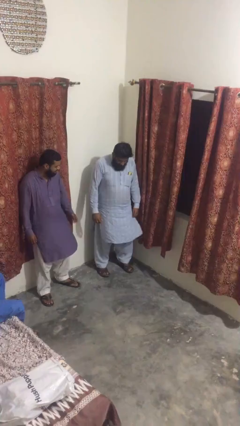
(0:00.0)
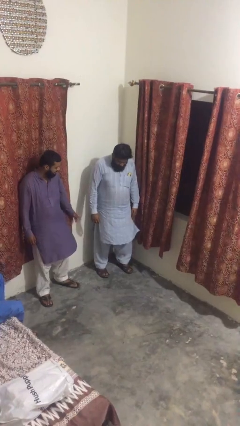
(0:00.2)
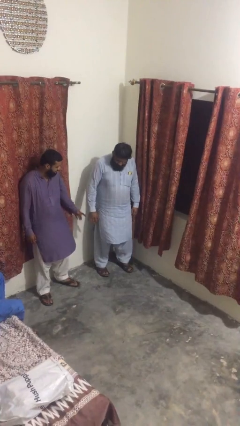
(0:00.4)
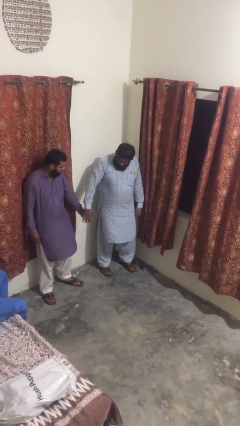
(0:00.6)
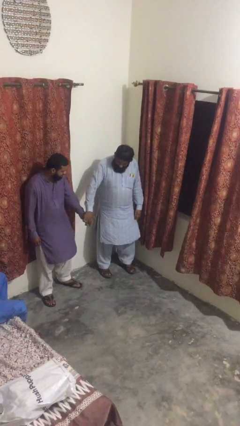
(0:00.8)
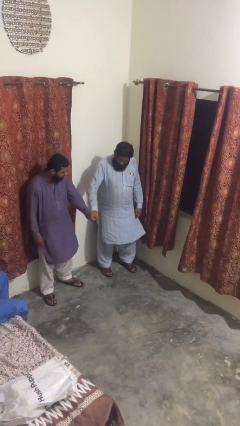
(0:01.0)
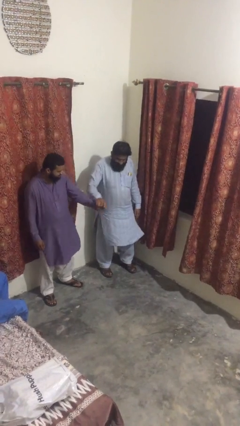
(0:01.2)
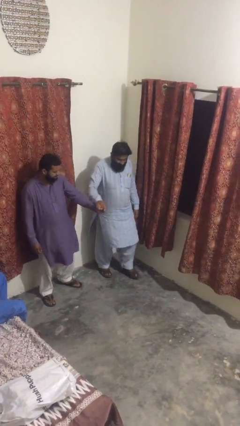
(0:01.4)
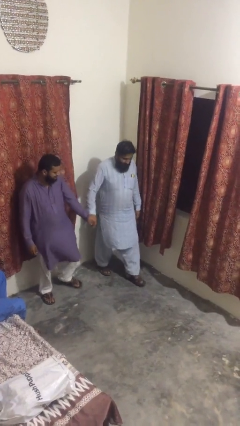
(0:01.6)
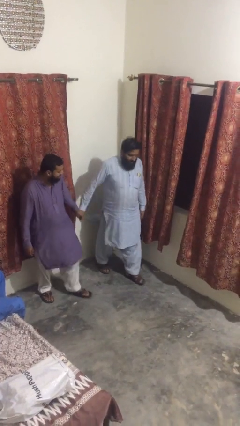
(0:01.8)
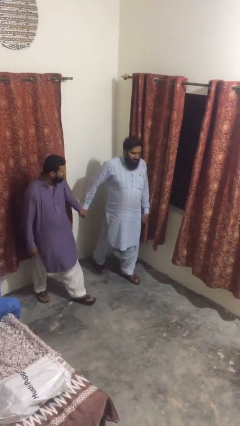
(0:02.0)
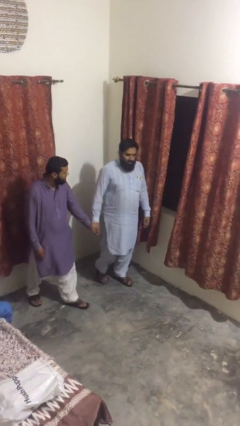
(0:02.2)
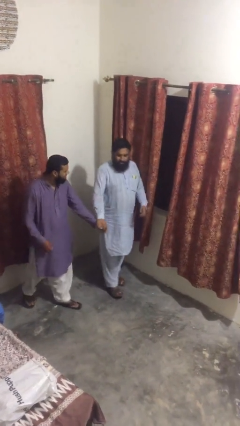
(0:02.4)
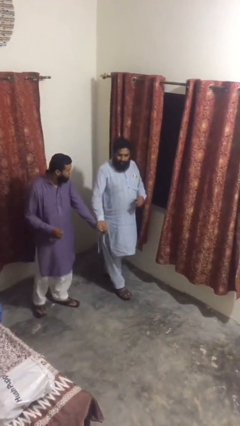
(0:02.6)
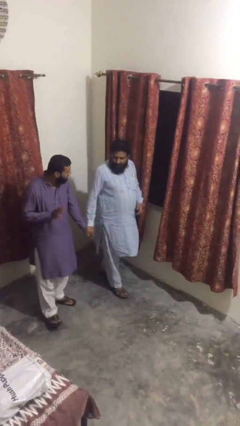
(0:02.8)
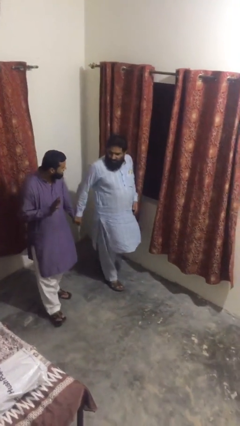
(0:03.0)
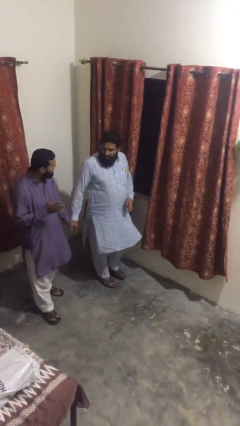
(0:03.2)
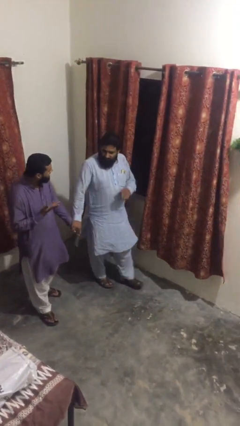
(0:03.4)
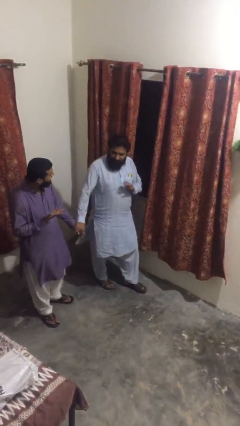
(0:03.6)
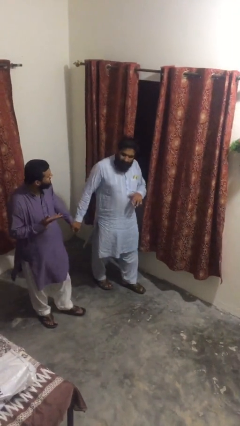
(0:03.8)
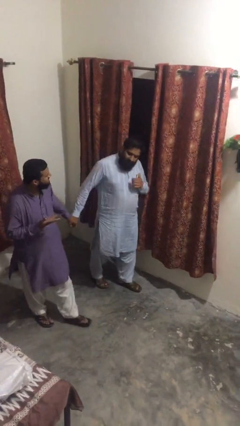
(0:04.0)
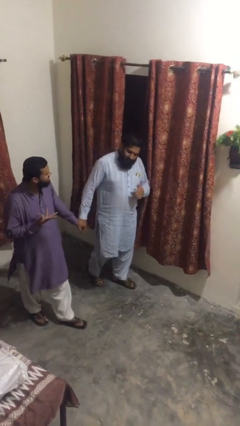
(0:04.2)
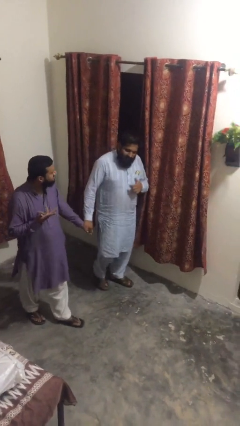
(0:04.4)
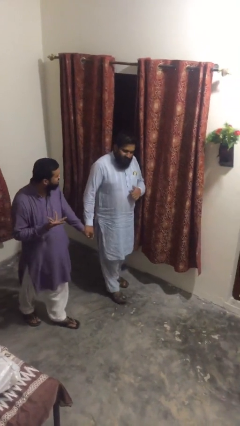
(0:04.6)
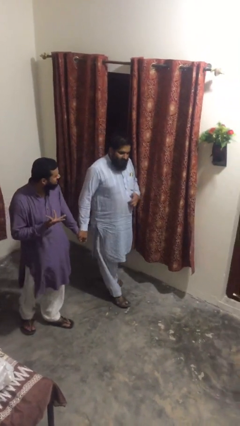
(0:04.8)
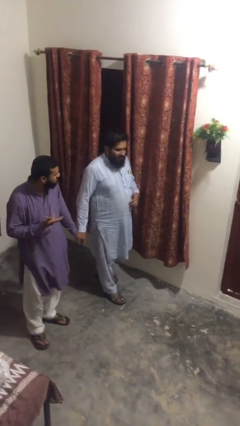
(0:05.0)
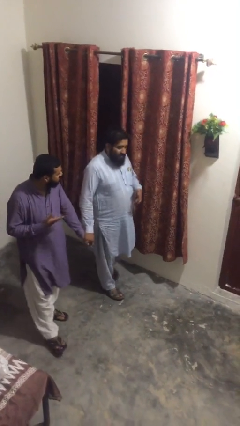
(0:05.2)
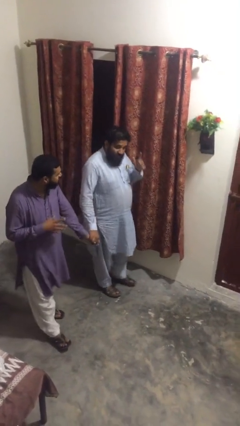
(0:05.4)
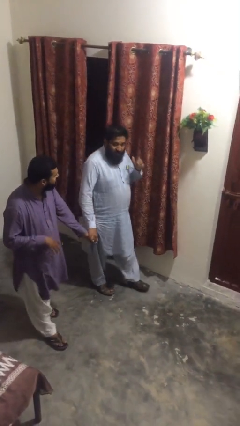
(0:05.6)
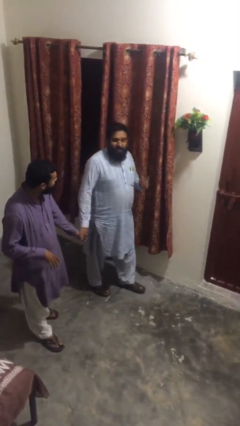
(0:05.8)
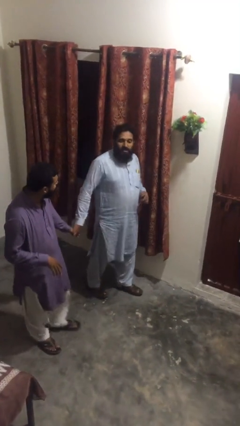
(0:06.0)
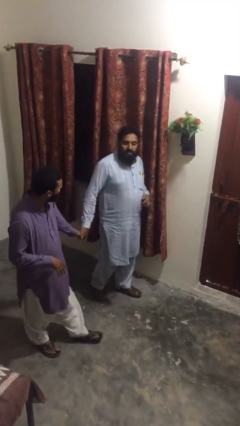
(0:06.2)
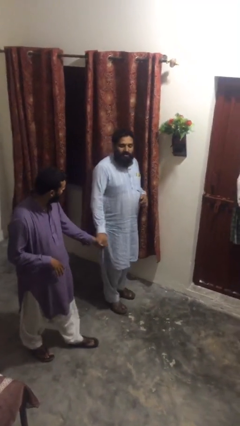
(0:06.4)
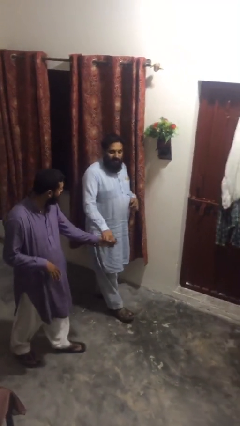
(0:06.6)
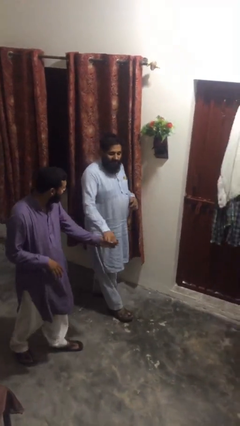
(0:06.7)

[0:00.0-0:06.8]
person holds hand

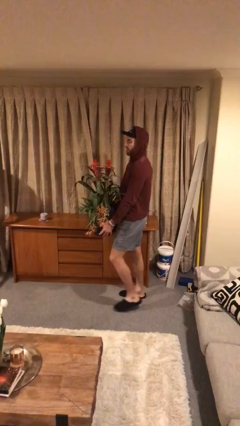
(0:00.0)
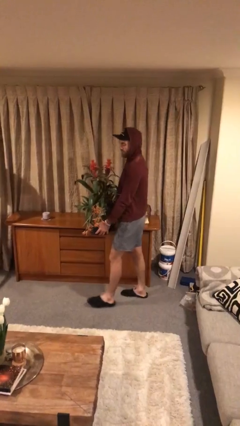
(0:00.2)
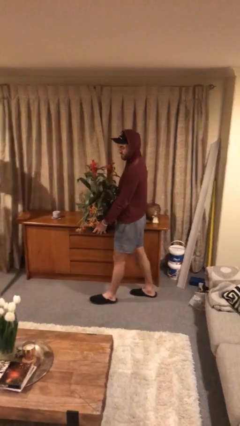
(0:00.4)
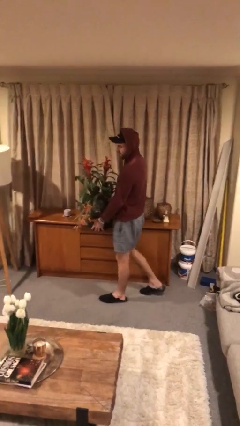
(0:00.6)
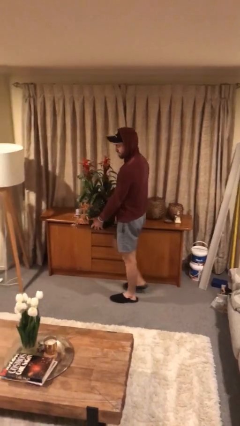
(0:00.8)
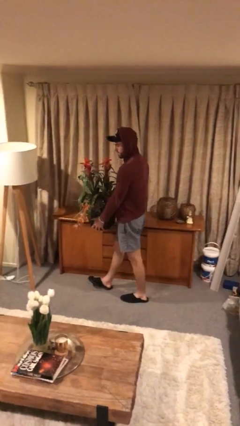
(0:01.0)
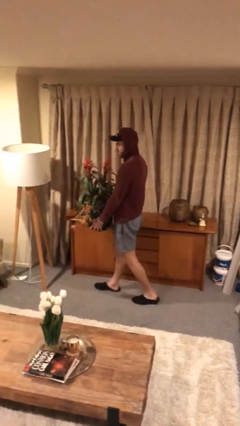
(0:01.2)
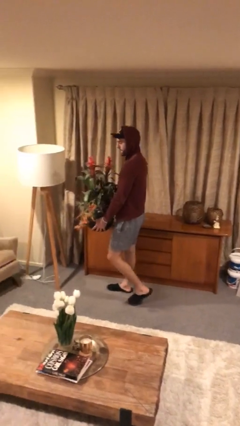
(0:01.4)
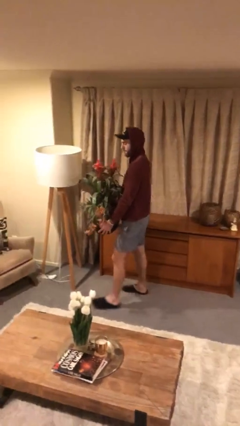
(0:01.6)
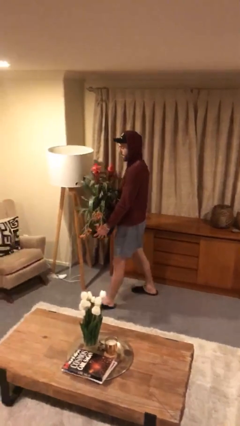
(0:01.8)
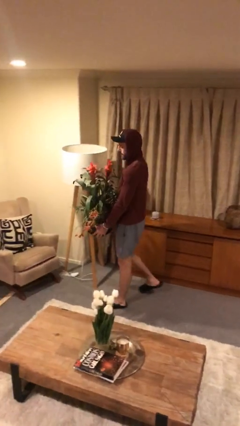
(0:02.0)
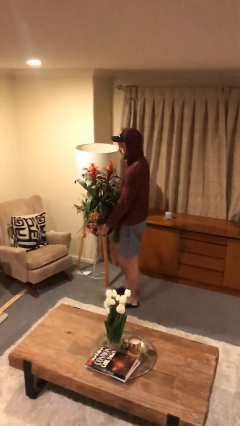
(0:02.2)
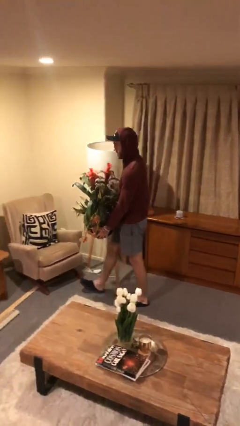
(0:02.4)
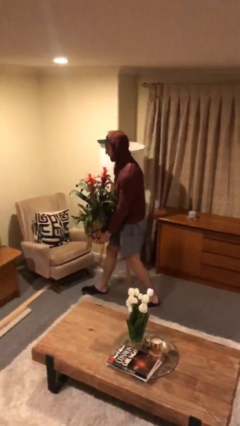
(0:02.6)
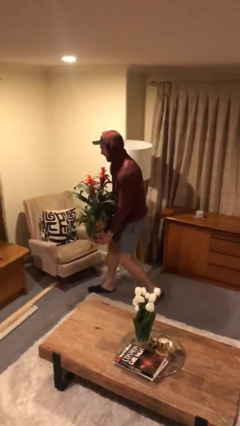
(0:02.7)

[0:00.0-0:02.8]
person carries heavy object

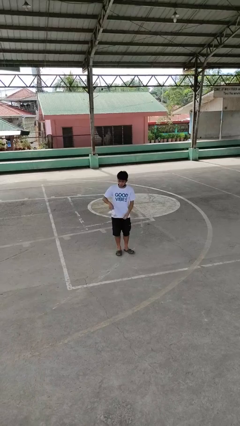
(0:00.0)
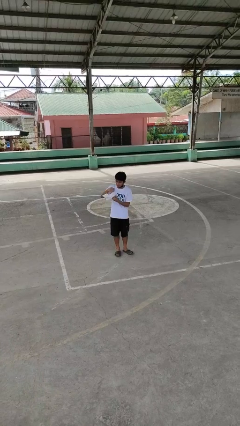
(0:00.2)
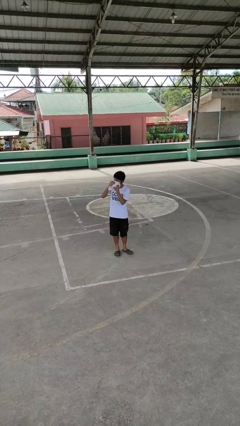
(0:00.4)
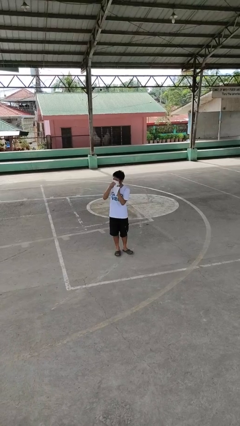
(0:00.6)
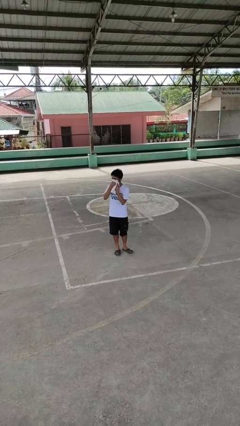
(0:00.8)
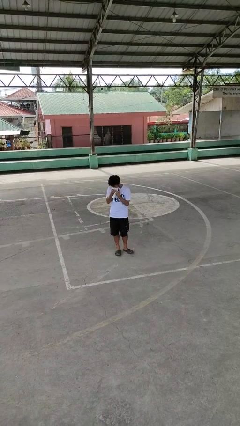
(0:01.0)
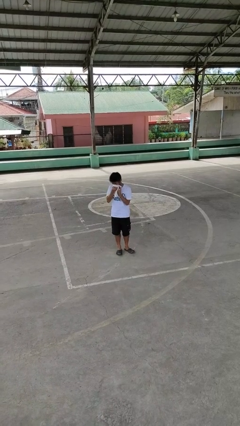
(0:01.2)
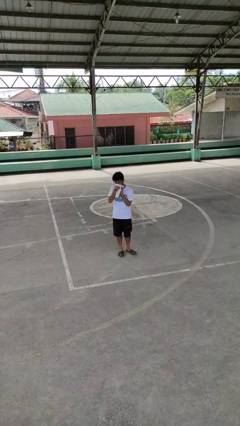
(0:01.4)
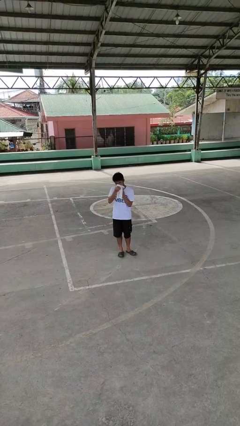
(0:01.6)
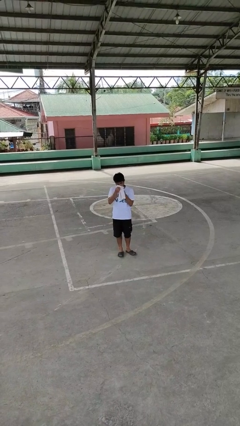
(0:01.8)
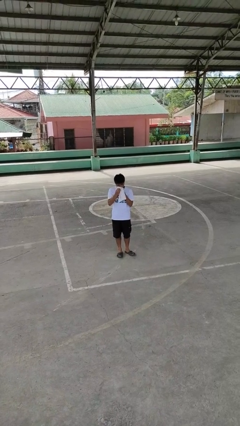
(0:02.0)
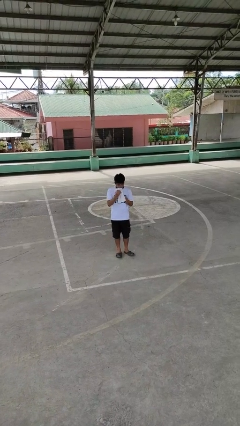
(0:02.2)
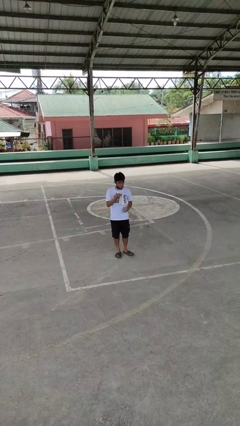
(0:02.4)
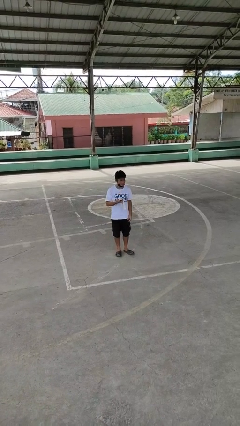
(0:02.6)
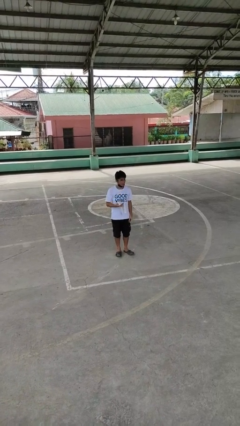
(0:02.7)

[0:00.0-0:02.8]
person holds object above head

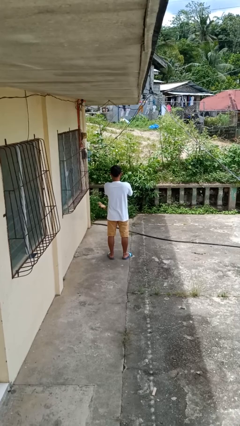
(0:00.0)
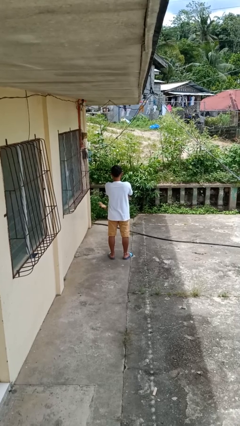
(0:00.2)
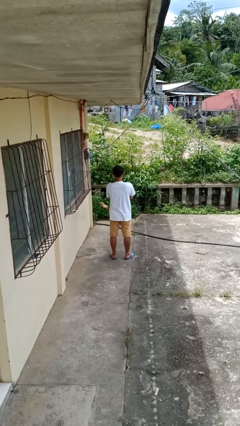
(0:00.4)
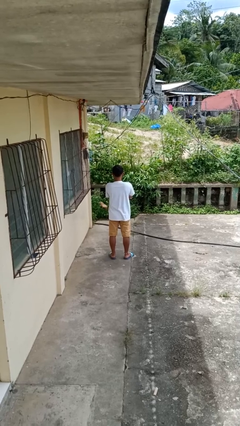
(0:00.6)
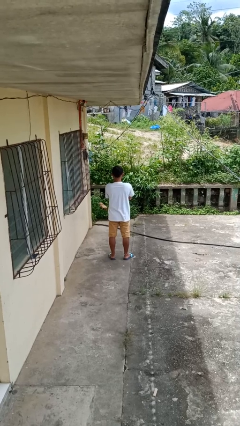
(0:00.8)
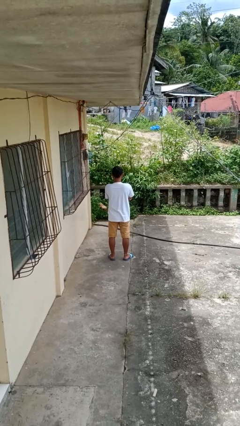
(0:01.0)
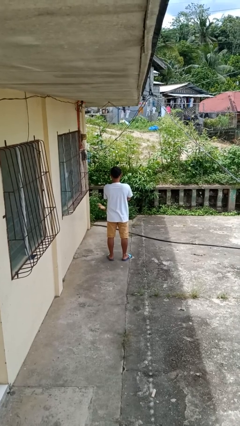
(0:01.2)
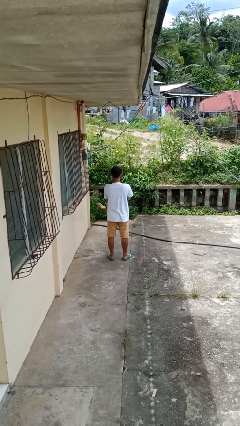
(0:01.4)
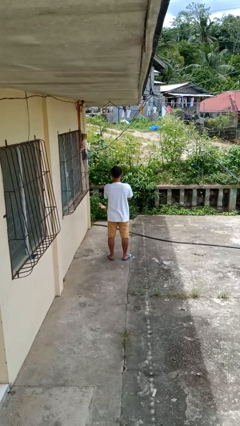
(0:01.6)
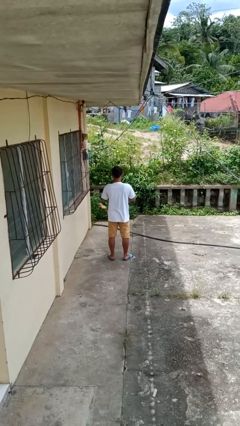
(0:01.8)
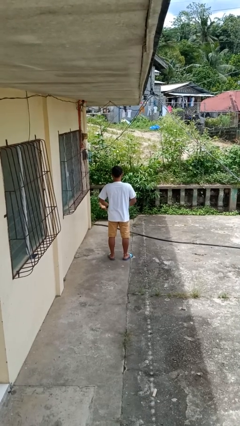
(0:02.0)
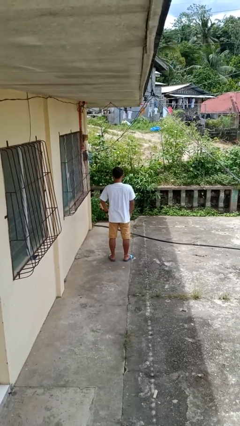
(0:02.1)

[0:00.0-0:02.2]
person crosses arms

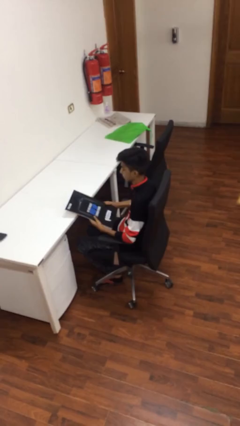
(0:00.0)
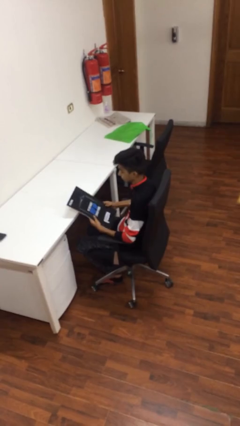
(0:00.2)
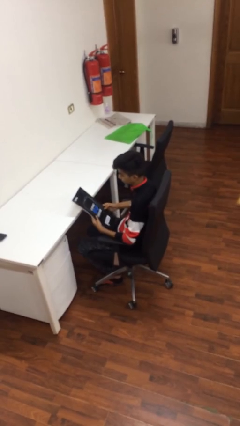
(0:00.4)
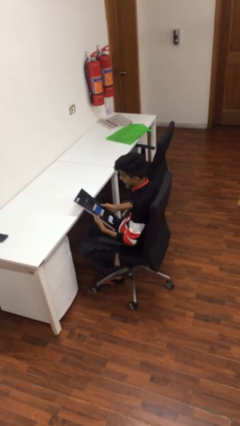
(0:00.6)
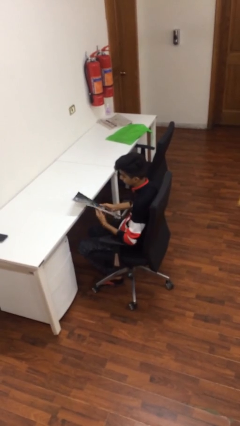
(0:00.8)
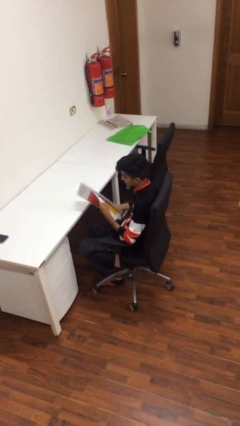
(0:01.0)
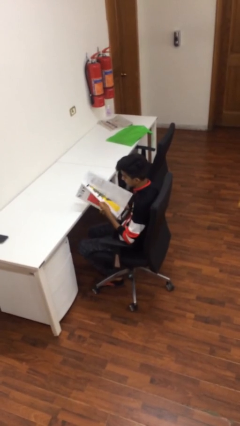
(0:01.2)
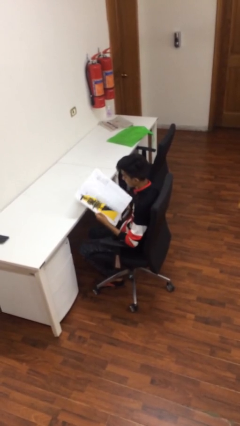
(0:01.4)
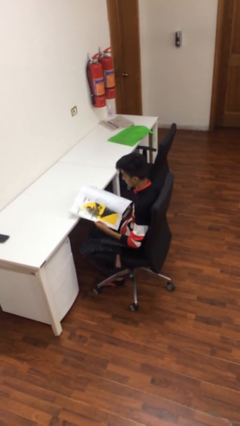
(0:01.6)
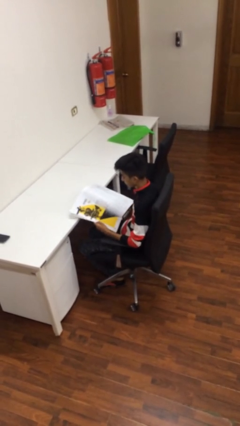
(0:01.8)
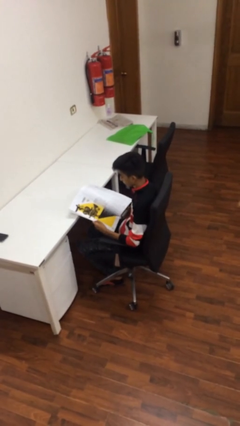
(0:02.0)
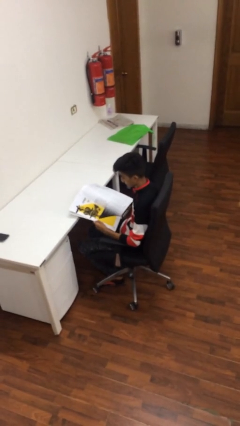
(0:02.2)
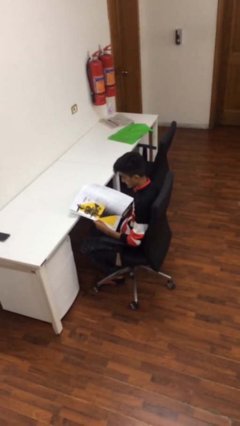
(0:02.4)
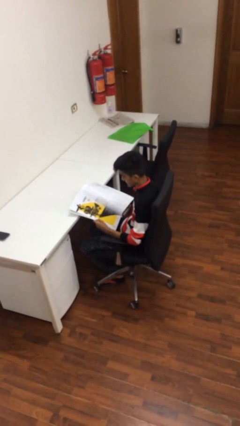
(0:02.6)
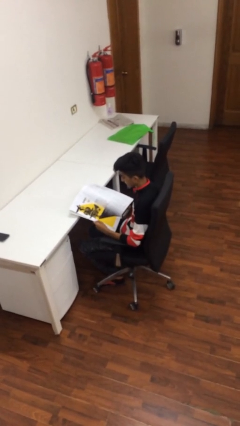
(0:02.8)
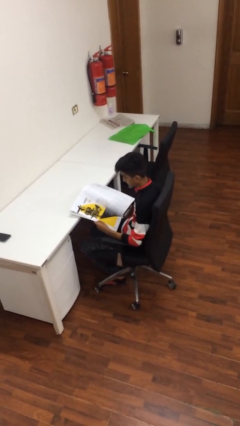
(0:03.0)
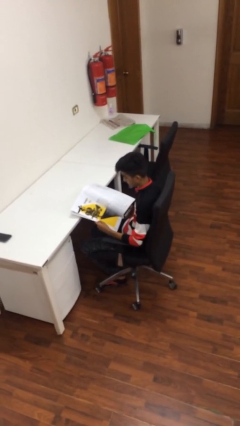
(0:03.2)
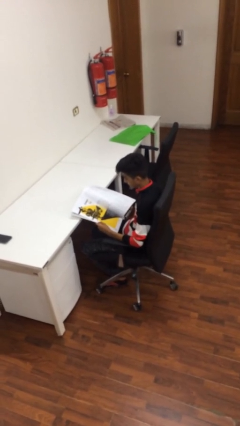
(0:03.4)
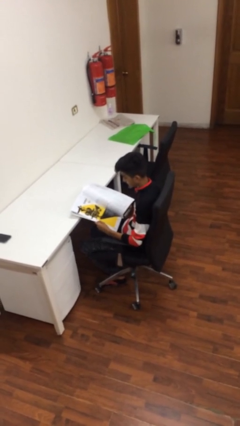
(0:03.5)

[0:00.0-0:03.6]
person reads document
